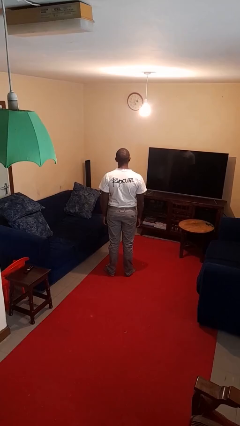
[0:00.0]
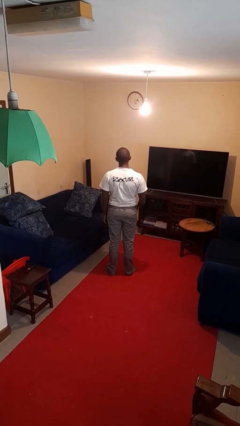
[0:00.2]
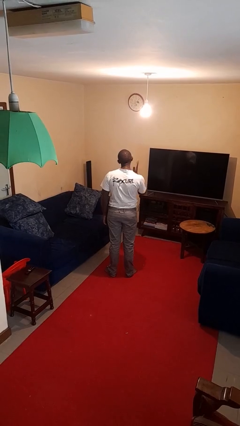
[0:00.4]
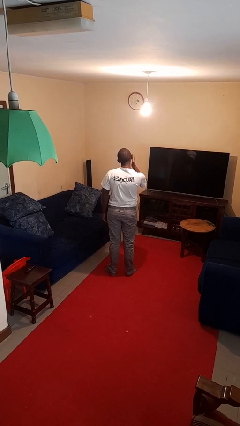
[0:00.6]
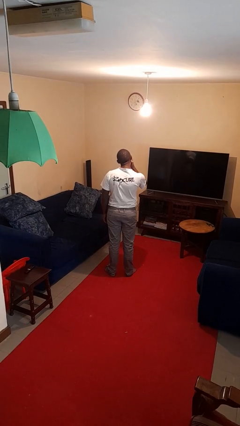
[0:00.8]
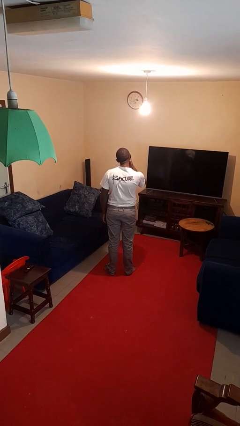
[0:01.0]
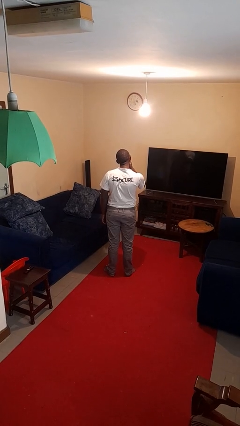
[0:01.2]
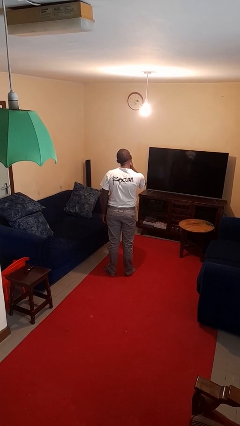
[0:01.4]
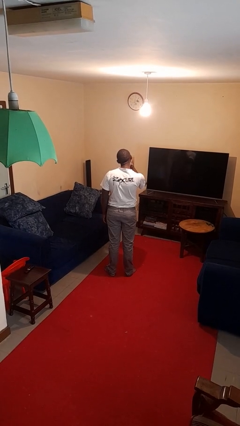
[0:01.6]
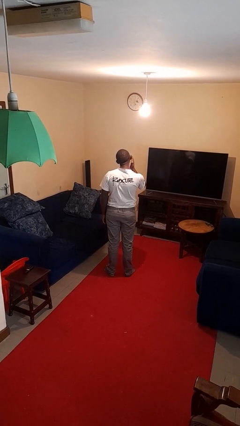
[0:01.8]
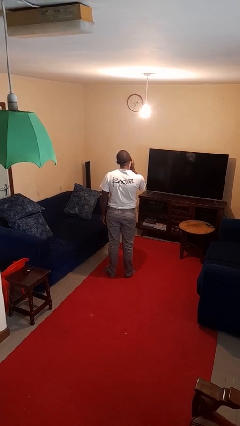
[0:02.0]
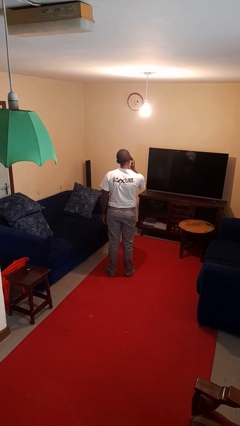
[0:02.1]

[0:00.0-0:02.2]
person swats bug

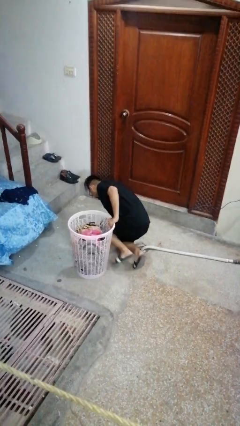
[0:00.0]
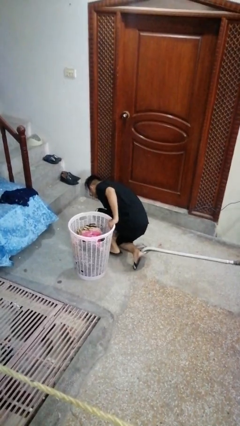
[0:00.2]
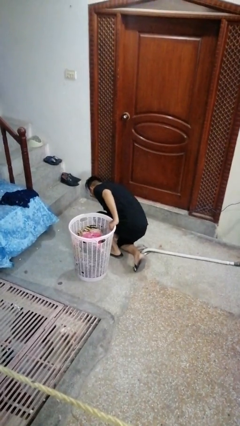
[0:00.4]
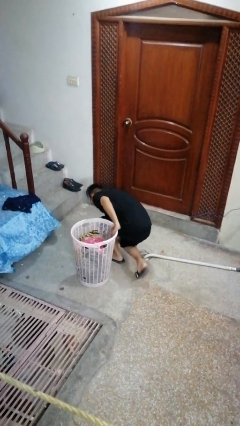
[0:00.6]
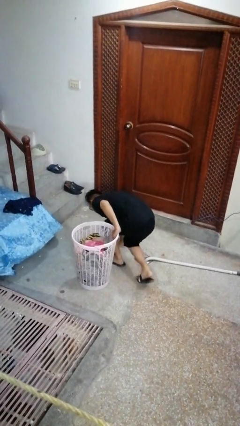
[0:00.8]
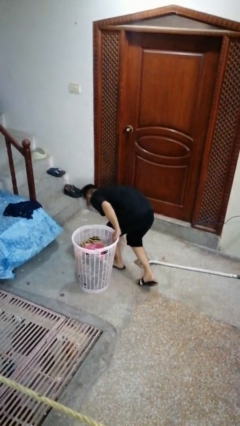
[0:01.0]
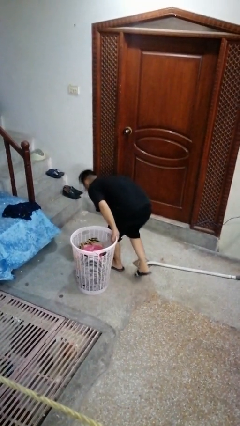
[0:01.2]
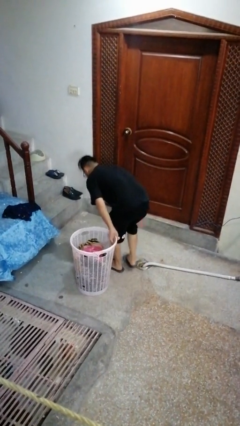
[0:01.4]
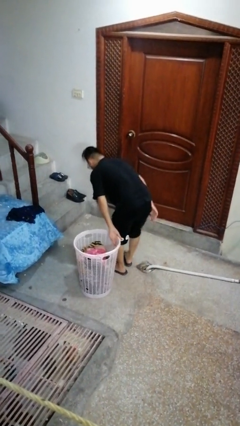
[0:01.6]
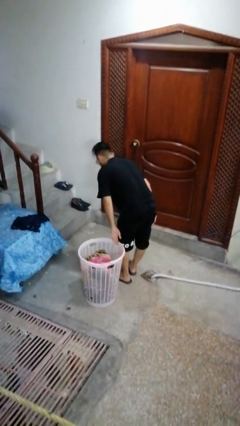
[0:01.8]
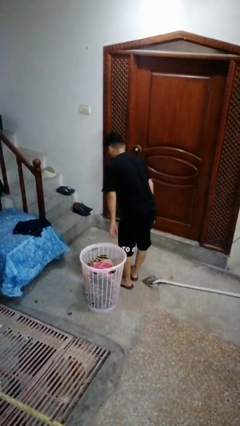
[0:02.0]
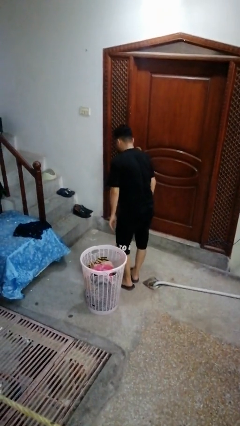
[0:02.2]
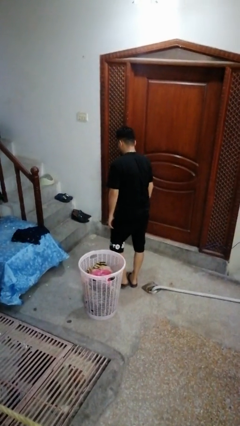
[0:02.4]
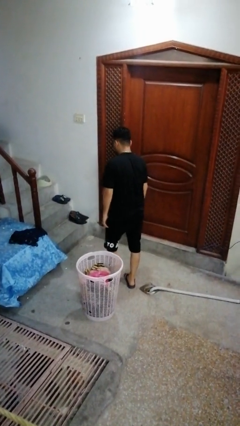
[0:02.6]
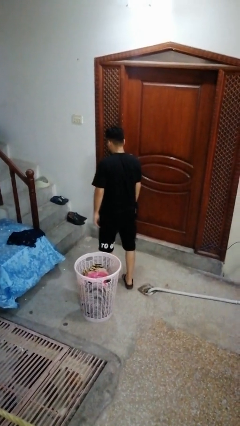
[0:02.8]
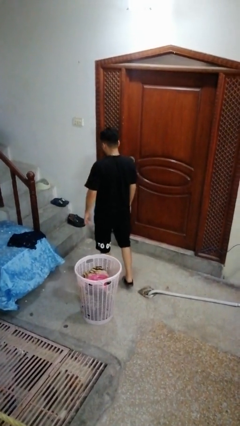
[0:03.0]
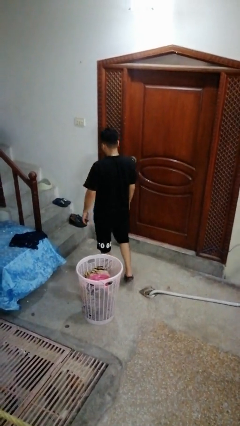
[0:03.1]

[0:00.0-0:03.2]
person stands up from floor

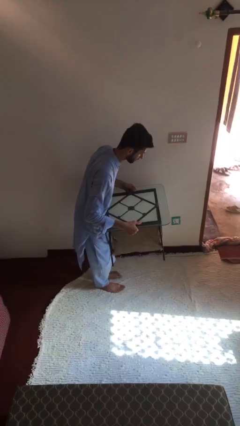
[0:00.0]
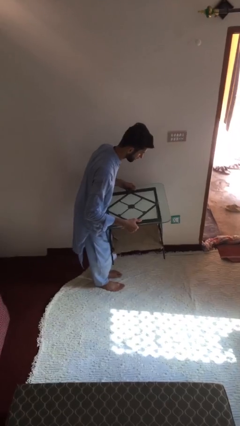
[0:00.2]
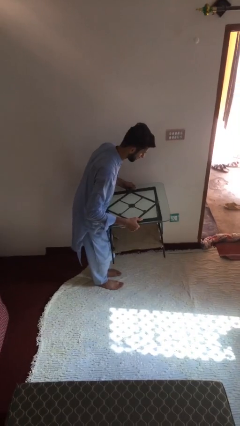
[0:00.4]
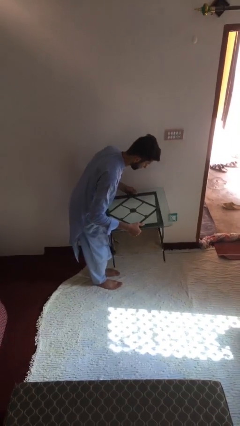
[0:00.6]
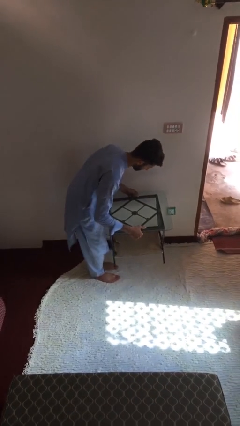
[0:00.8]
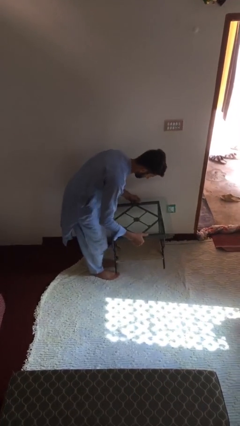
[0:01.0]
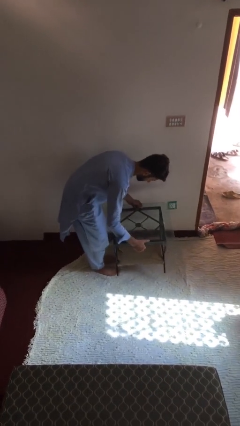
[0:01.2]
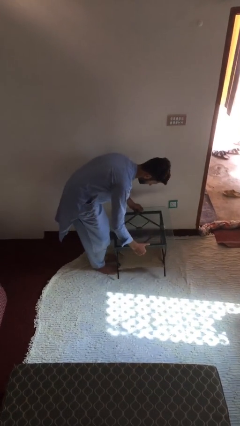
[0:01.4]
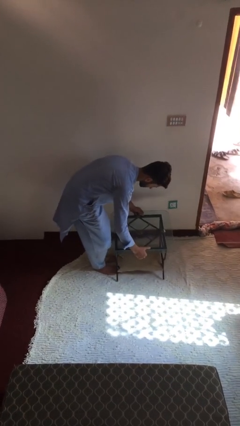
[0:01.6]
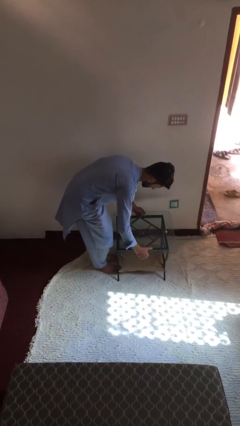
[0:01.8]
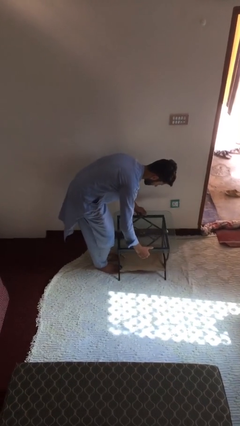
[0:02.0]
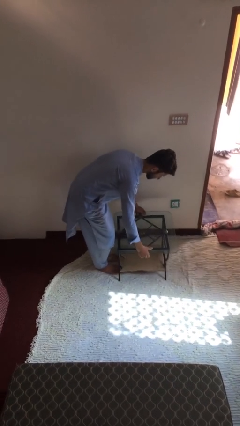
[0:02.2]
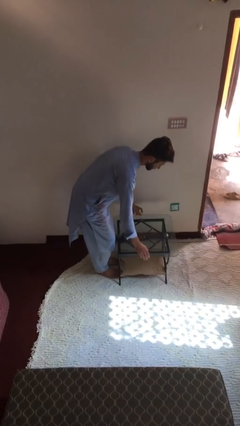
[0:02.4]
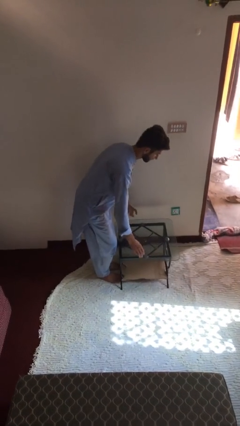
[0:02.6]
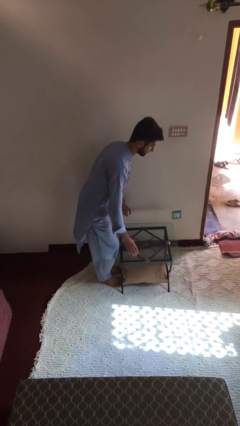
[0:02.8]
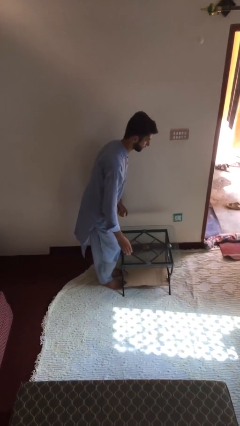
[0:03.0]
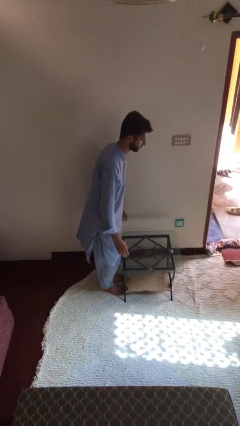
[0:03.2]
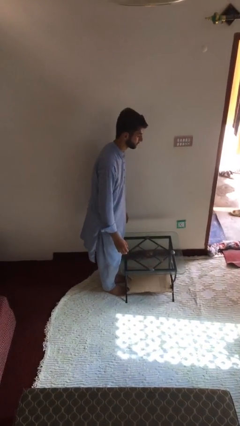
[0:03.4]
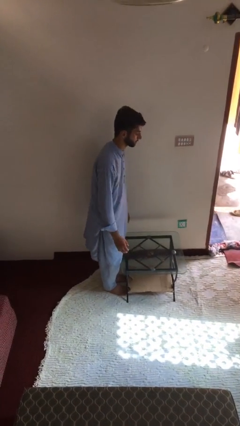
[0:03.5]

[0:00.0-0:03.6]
person puts down object on floor

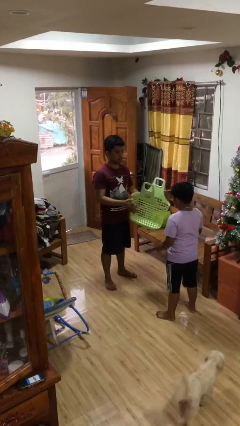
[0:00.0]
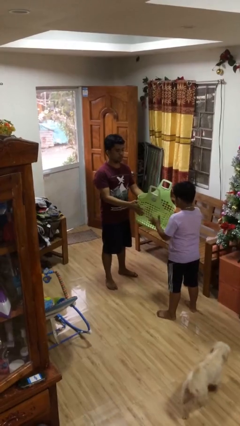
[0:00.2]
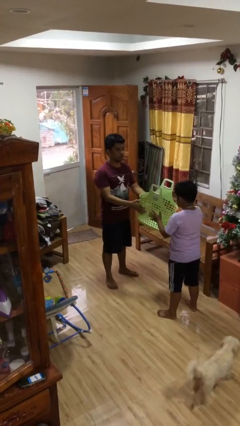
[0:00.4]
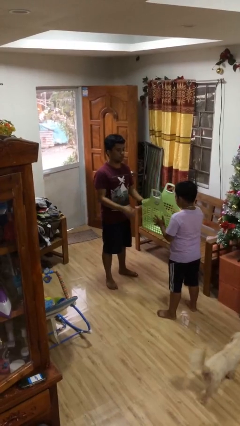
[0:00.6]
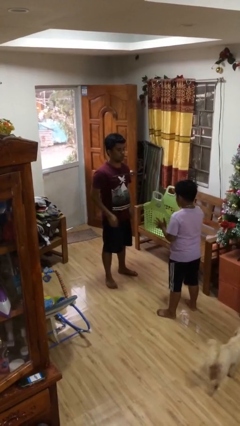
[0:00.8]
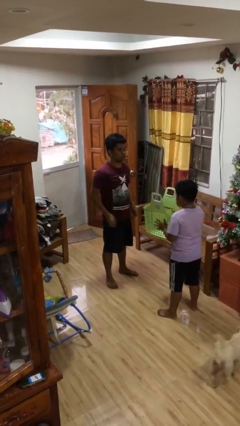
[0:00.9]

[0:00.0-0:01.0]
person transfers object to person

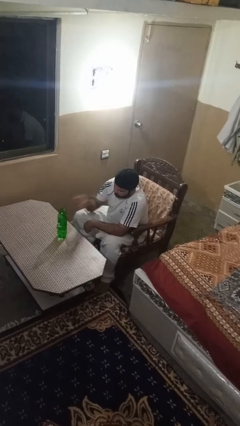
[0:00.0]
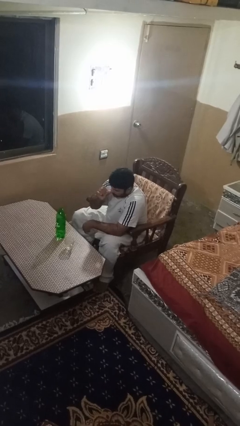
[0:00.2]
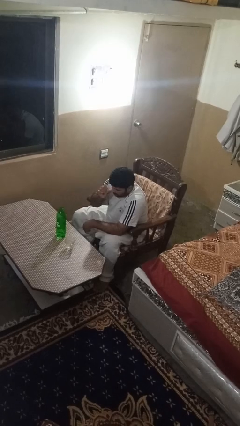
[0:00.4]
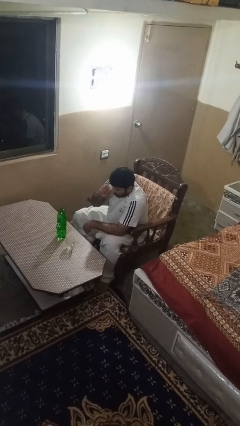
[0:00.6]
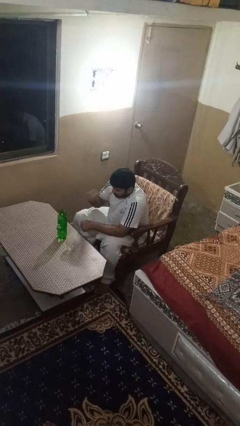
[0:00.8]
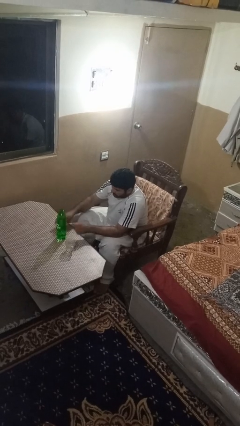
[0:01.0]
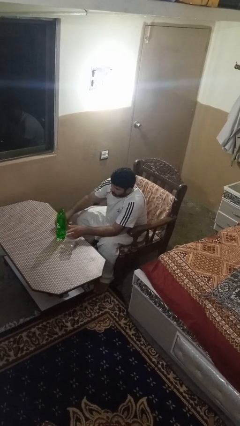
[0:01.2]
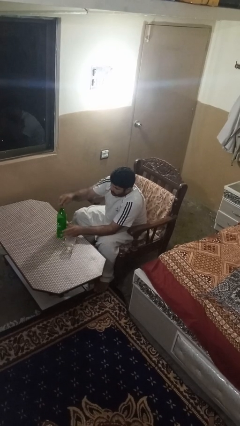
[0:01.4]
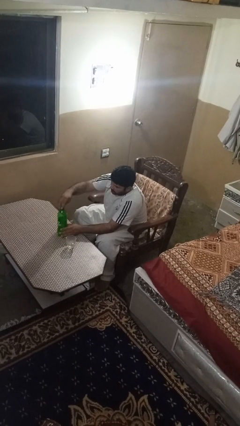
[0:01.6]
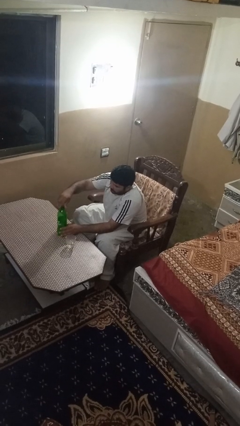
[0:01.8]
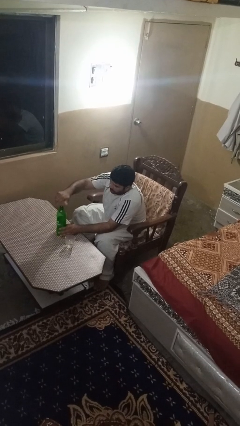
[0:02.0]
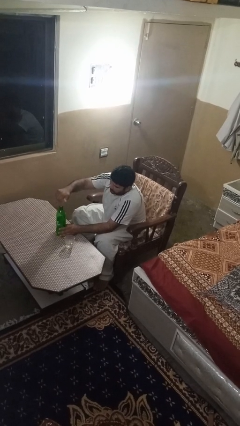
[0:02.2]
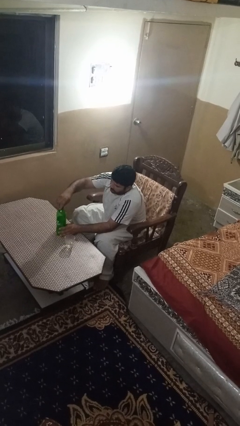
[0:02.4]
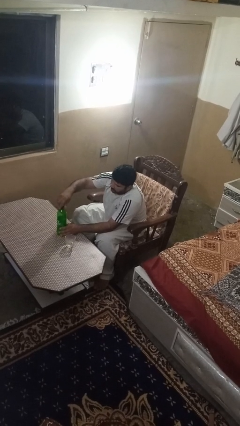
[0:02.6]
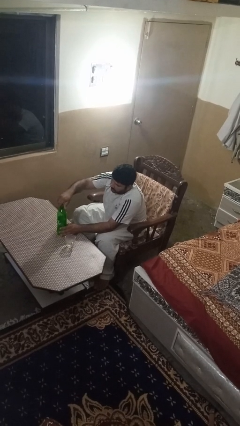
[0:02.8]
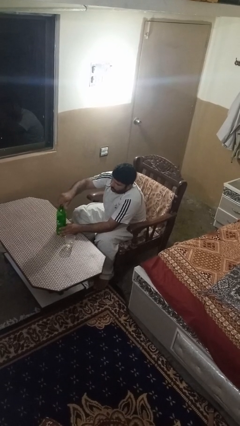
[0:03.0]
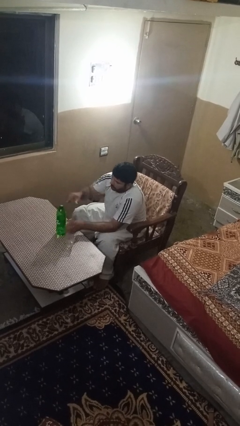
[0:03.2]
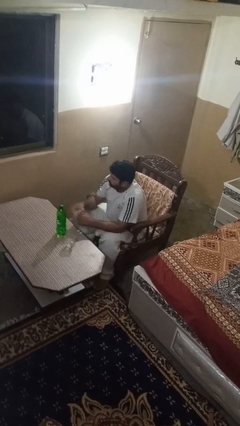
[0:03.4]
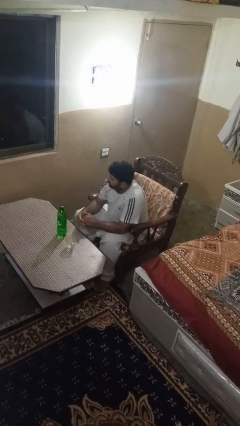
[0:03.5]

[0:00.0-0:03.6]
person screws lid to bottle

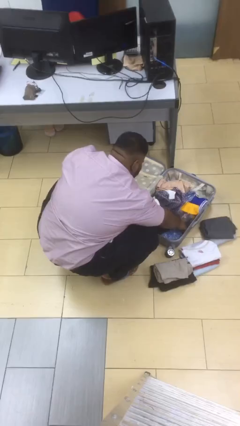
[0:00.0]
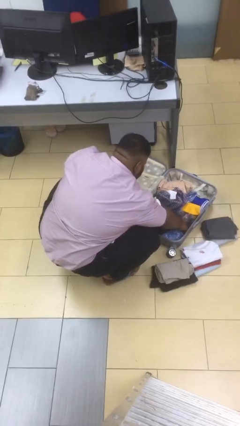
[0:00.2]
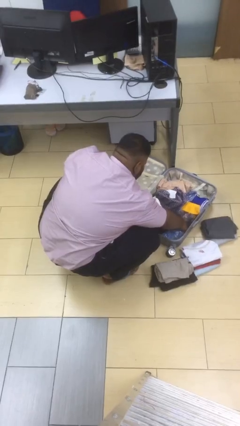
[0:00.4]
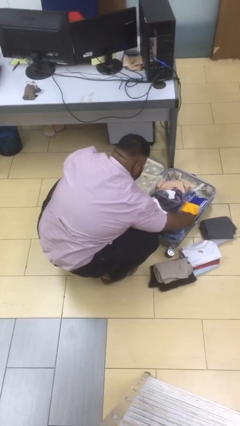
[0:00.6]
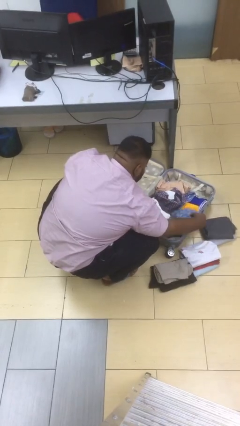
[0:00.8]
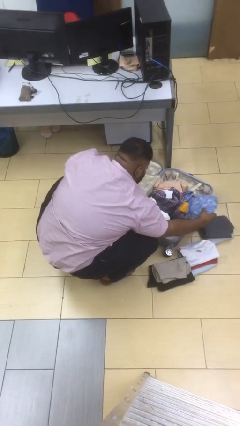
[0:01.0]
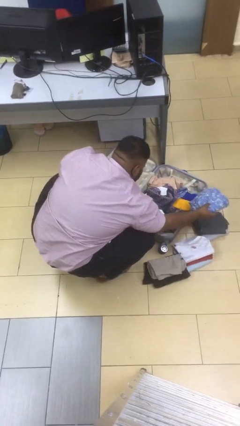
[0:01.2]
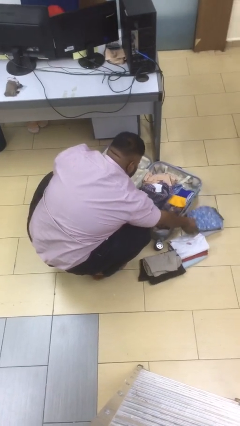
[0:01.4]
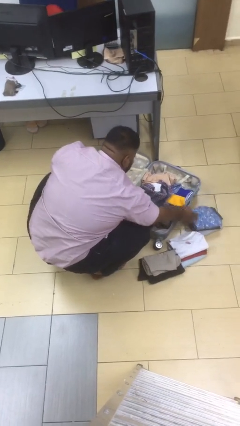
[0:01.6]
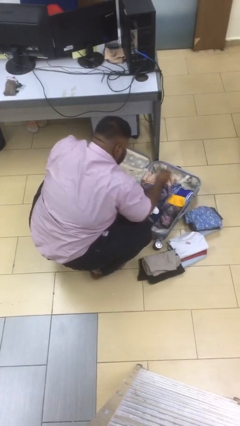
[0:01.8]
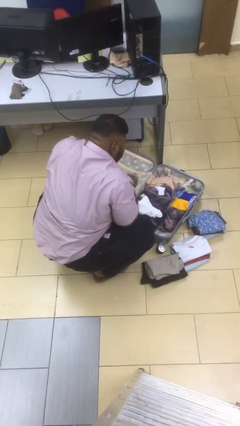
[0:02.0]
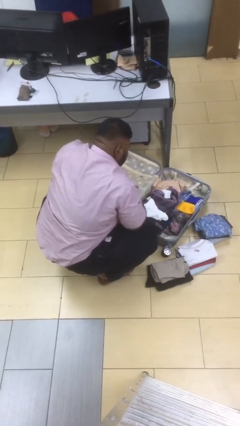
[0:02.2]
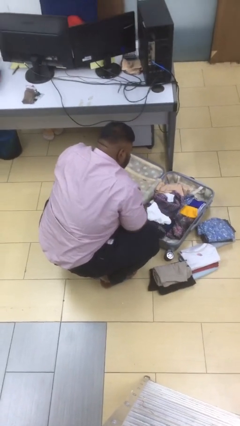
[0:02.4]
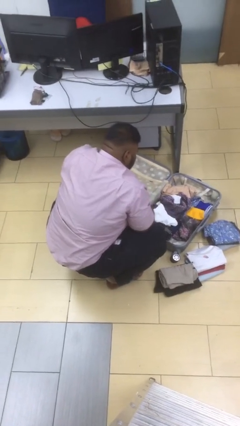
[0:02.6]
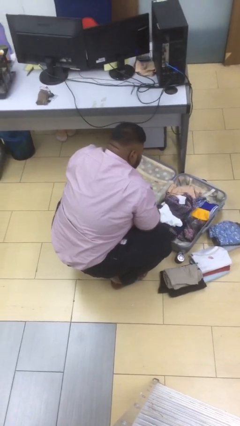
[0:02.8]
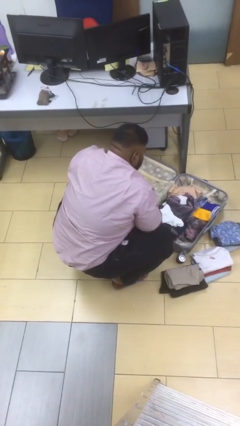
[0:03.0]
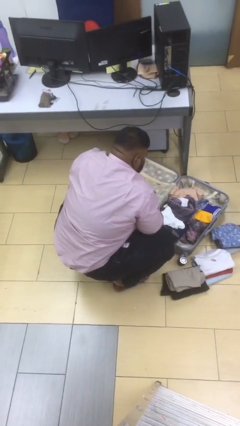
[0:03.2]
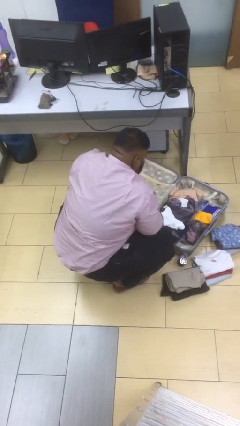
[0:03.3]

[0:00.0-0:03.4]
person unloads clothes from suitcase

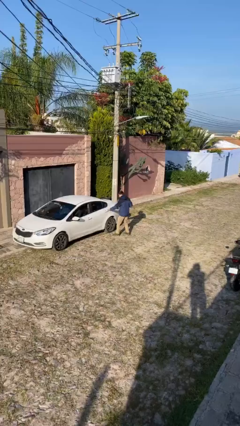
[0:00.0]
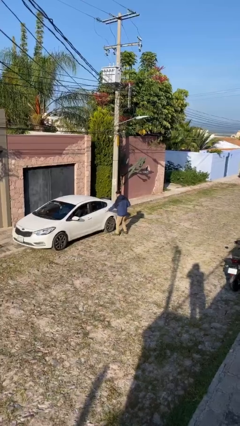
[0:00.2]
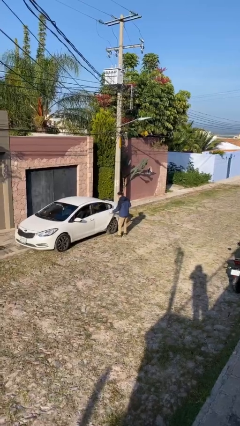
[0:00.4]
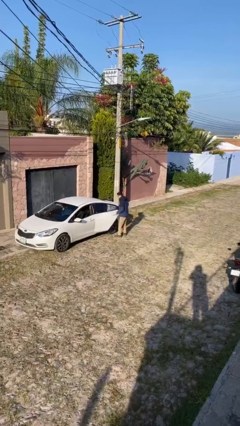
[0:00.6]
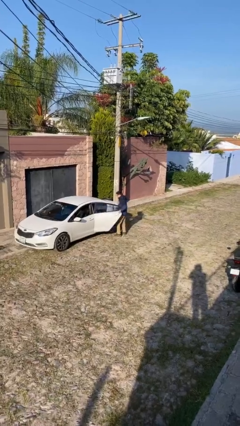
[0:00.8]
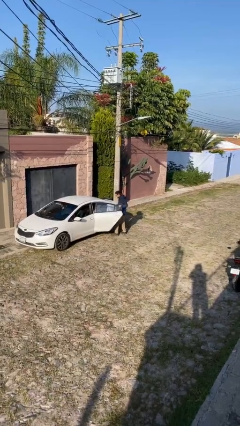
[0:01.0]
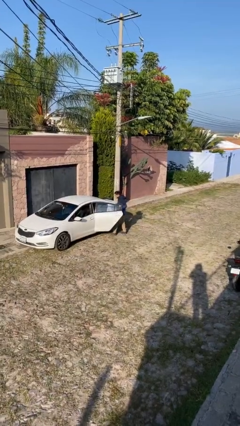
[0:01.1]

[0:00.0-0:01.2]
person opens car door
